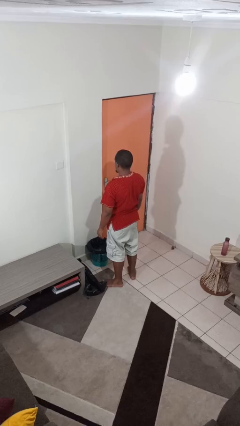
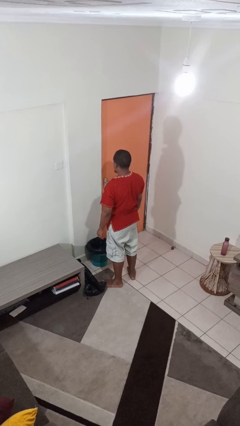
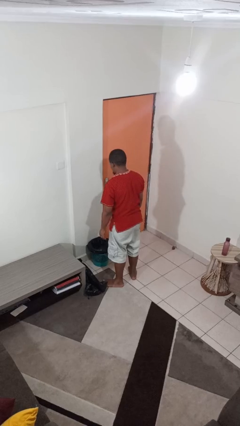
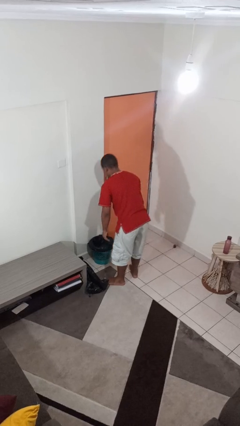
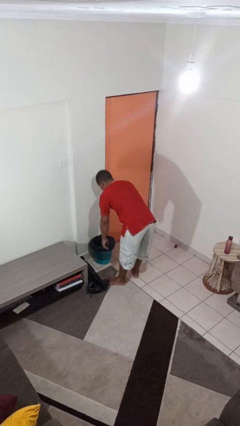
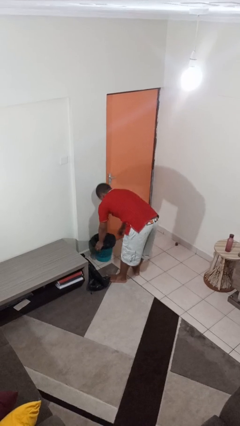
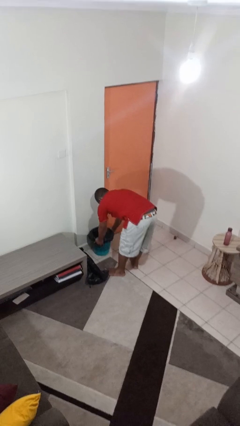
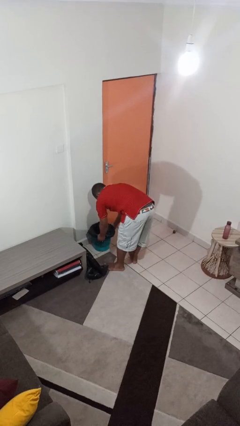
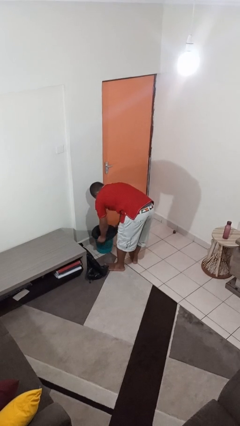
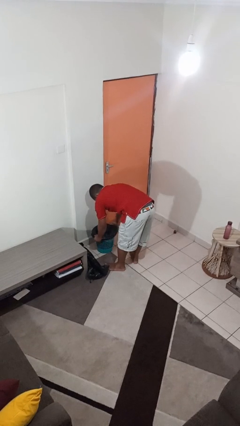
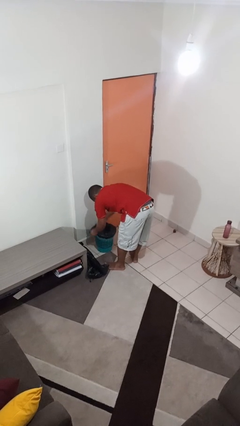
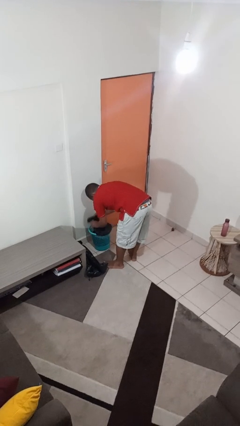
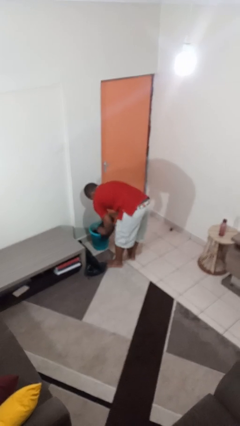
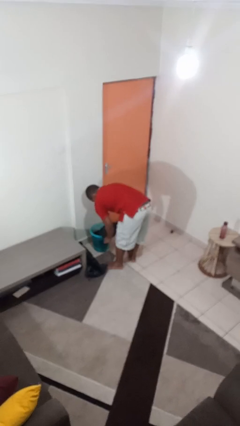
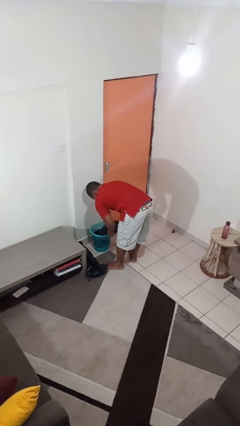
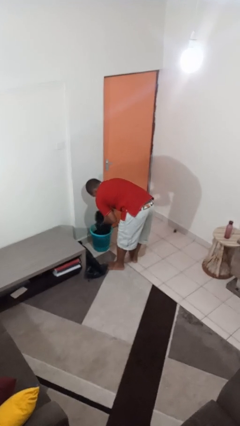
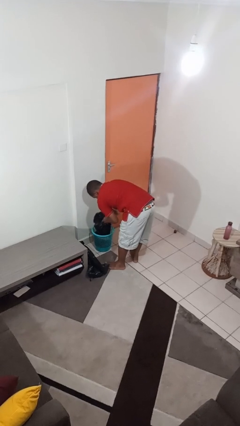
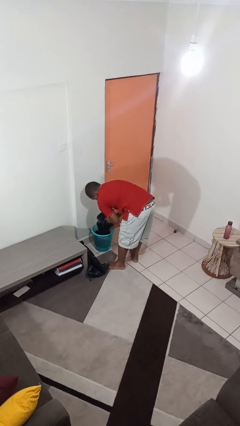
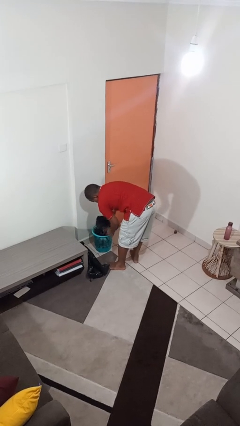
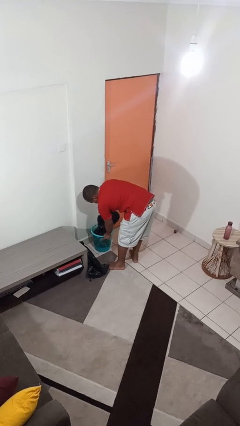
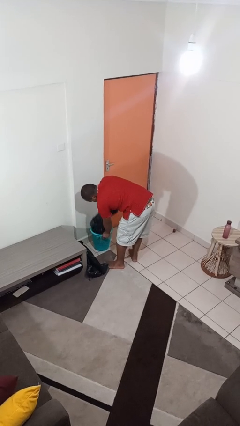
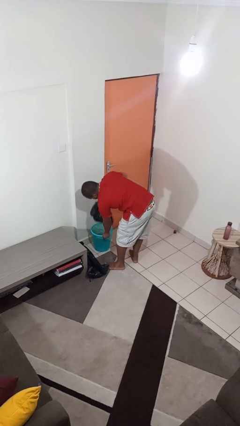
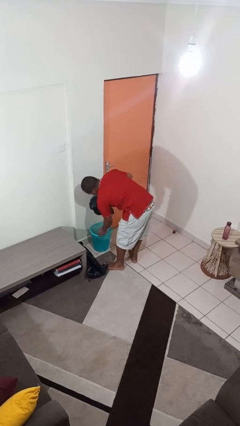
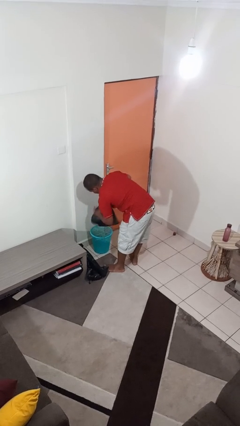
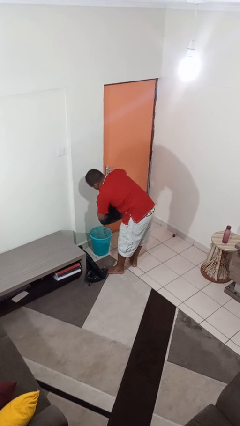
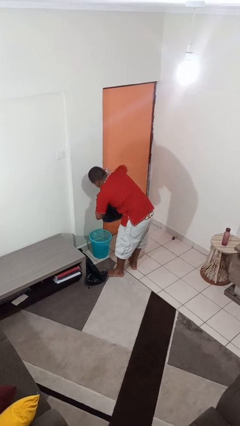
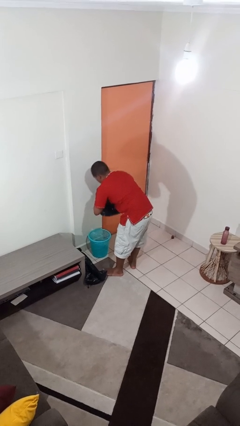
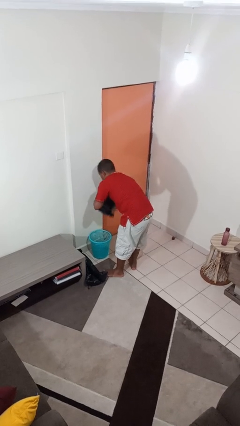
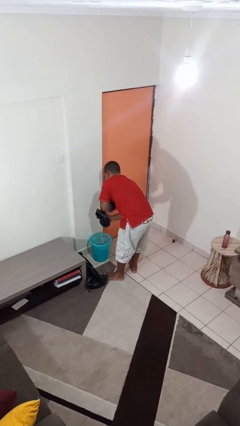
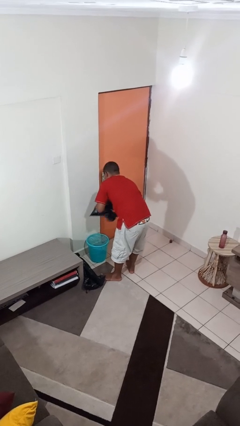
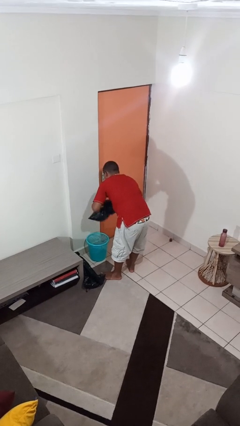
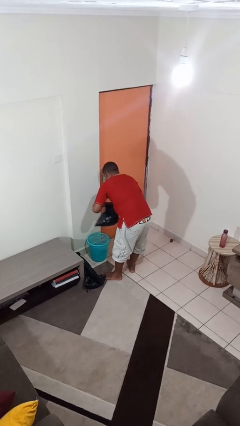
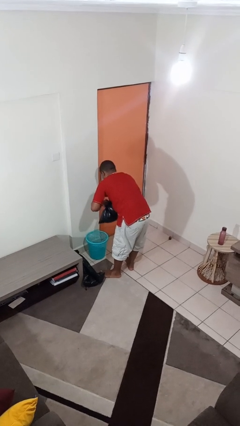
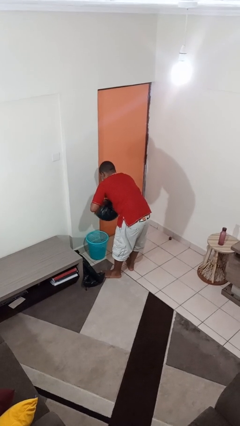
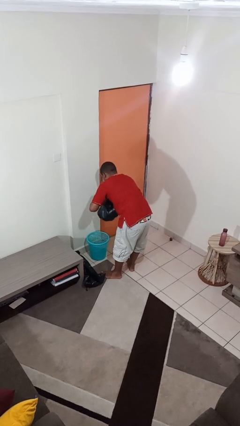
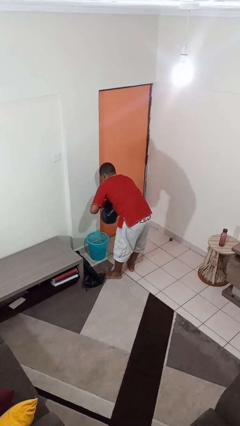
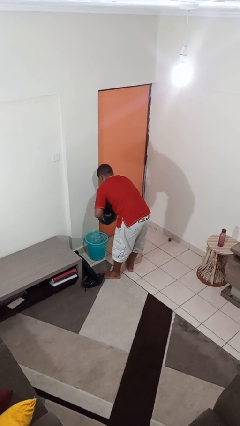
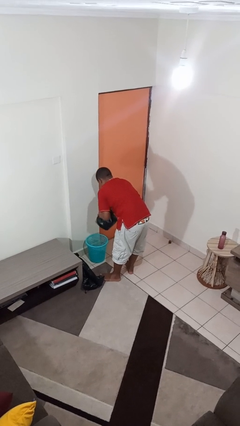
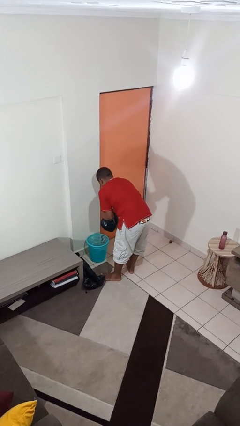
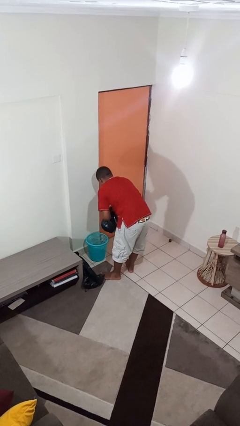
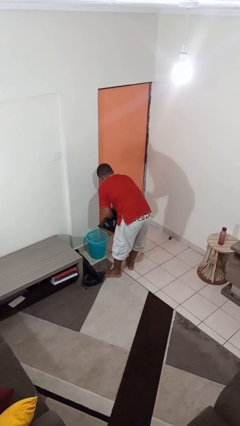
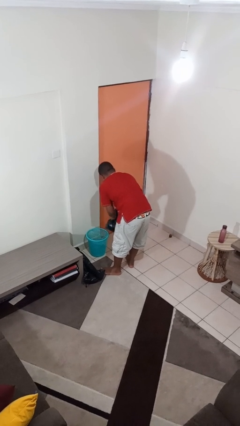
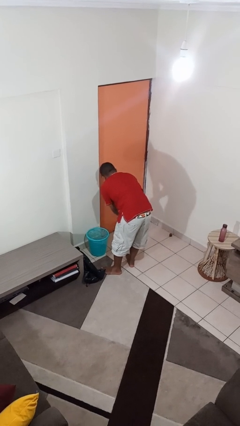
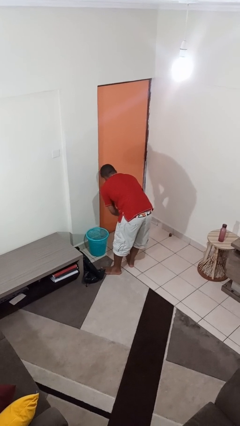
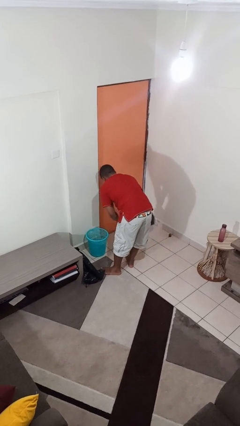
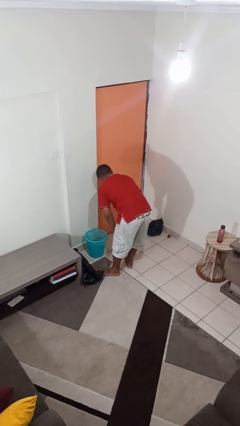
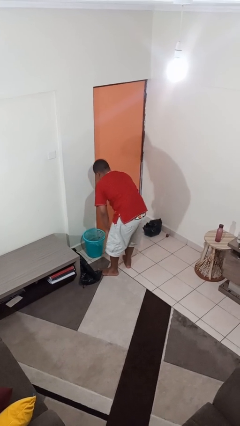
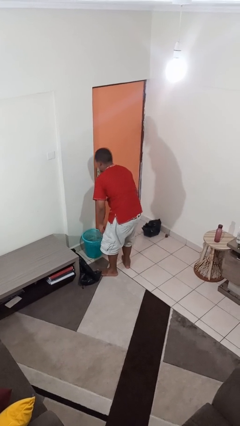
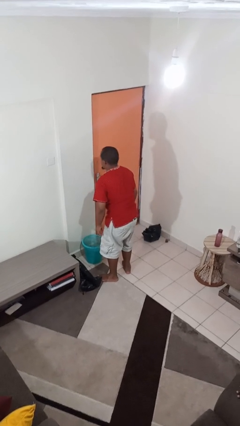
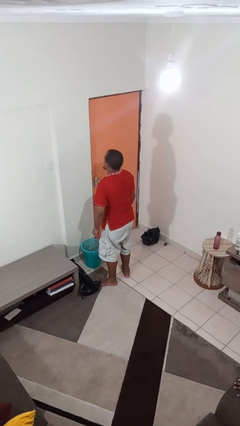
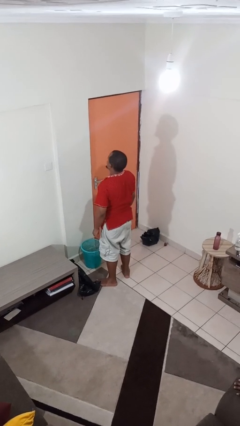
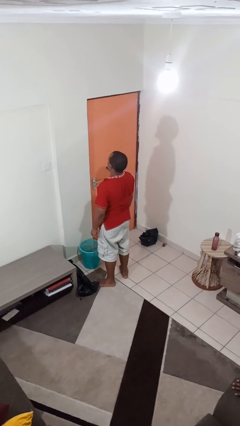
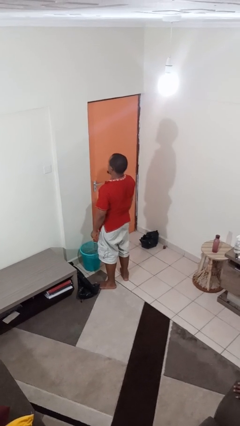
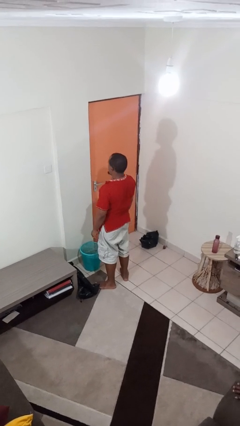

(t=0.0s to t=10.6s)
person removes trashbag from trashcan

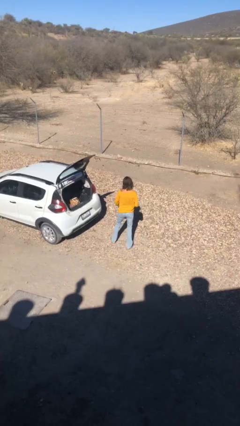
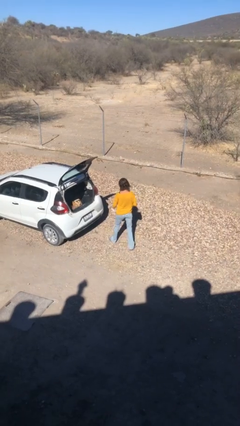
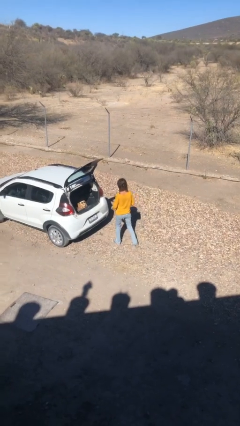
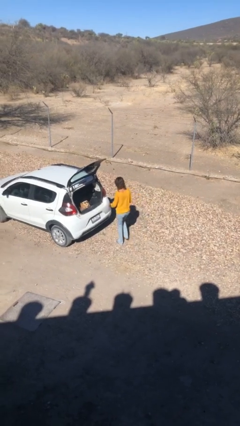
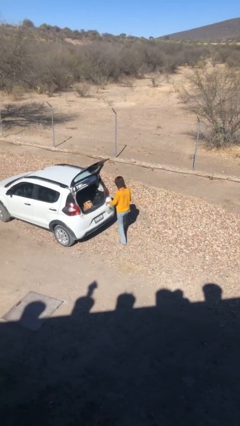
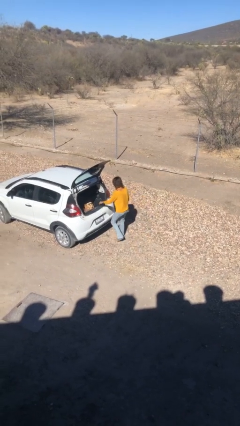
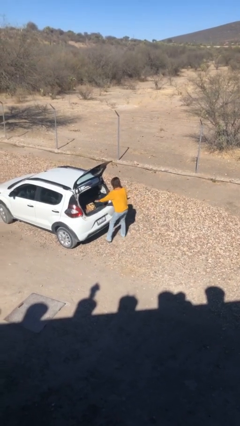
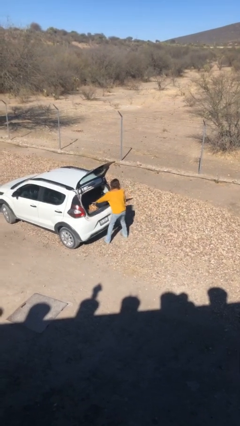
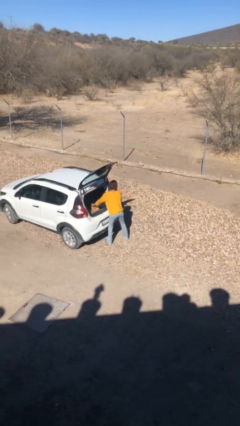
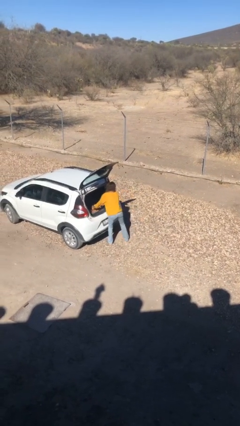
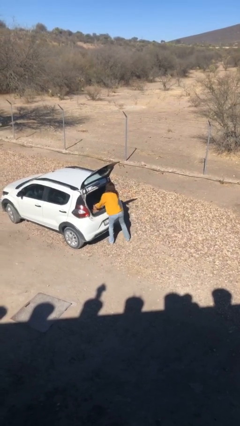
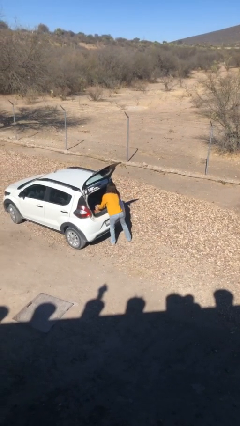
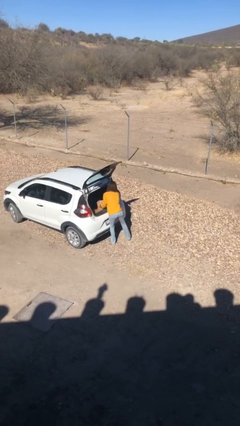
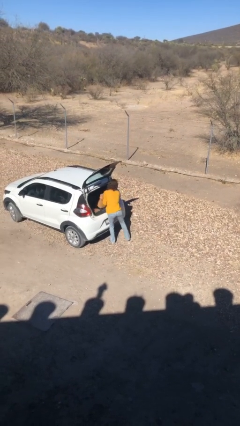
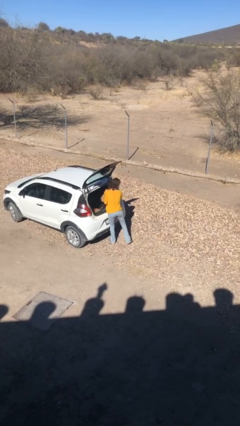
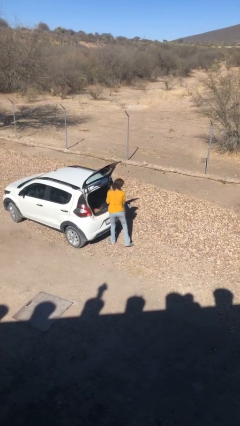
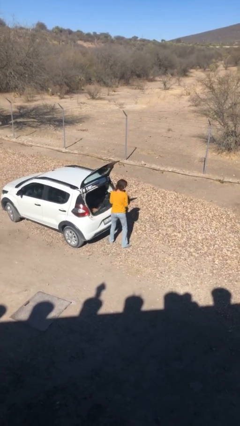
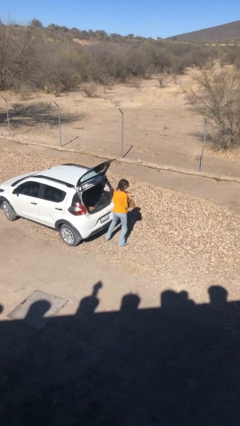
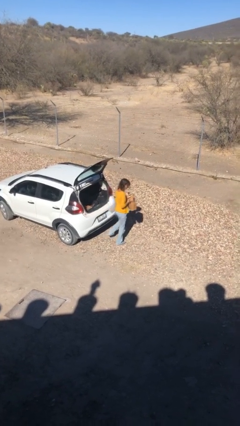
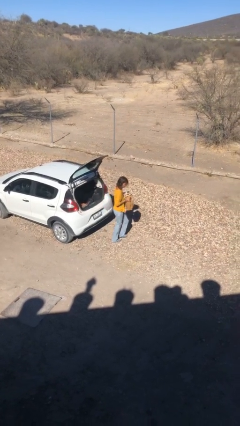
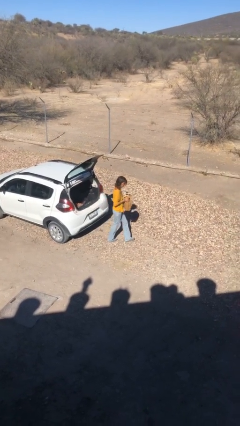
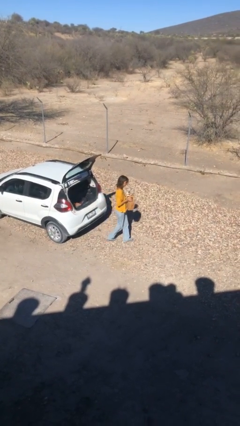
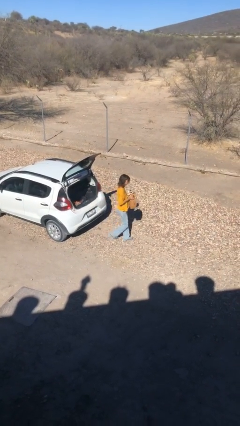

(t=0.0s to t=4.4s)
person unloads car

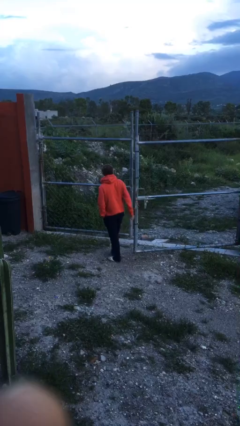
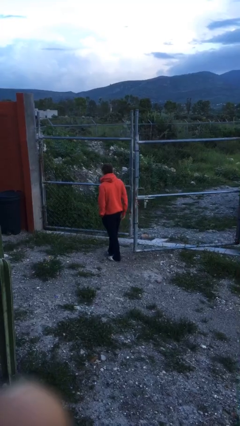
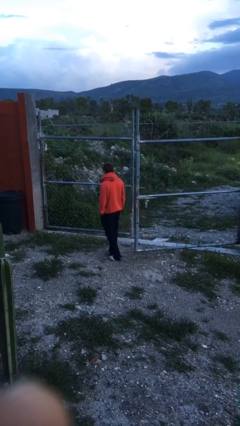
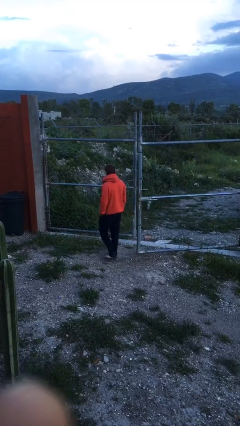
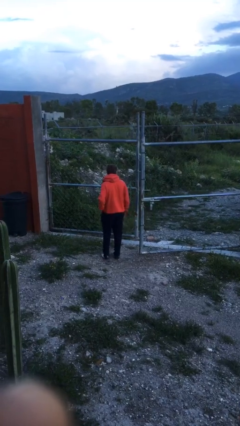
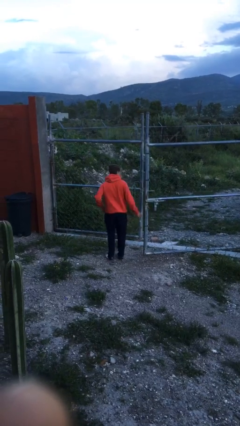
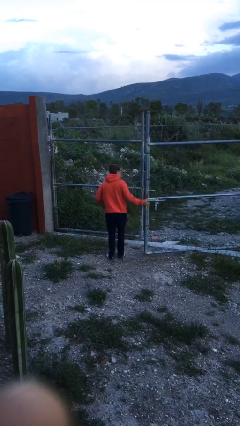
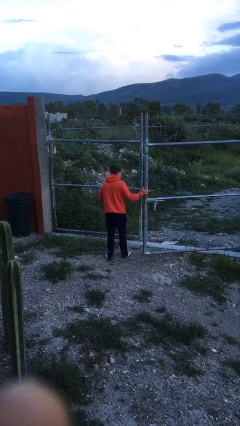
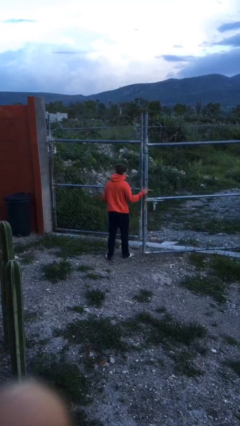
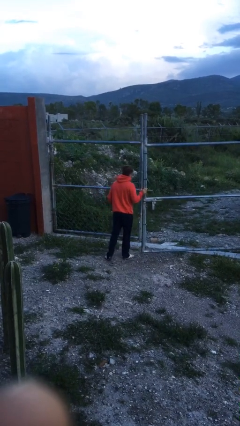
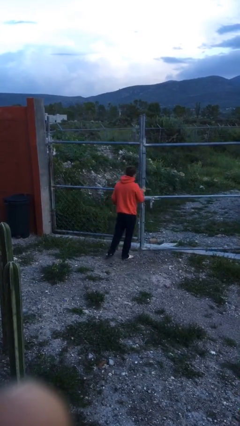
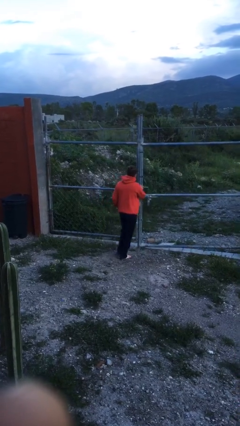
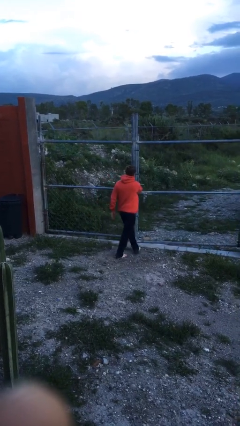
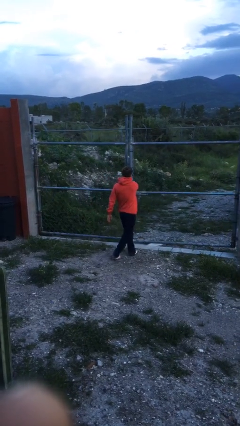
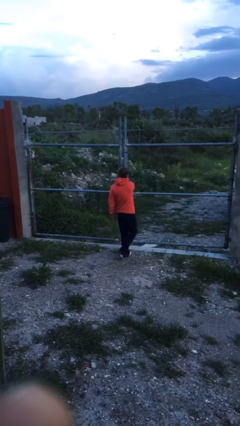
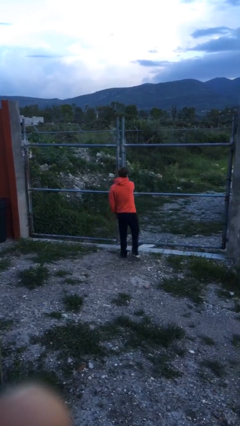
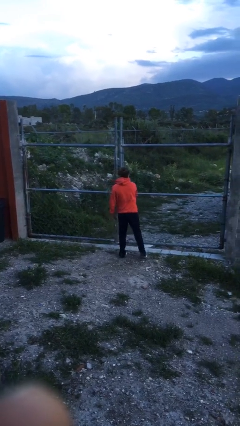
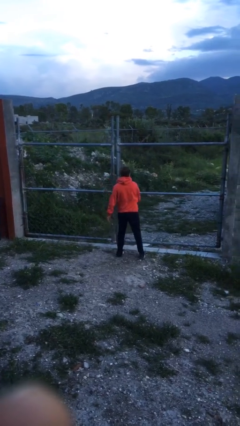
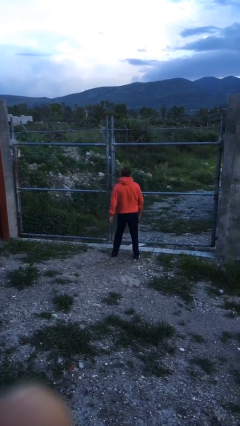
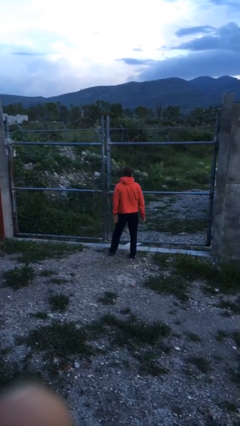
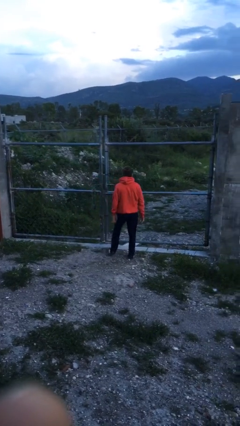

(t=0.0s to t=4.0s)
person closes gate
